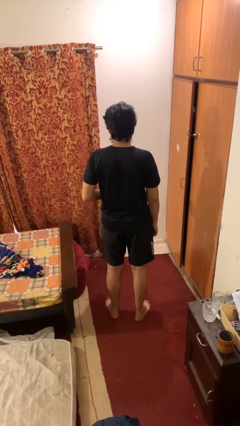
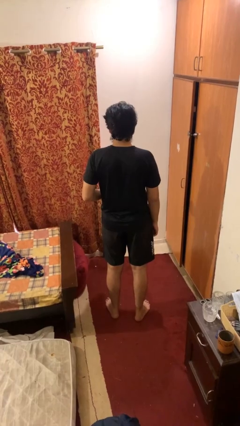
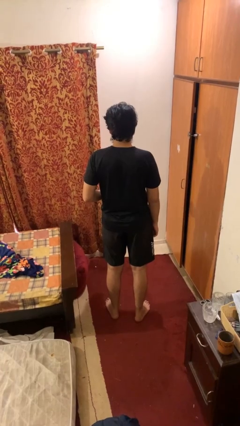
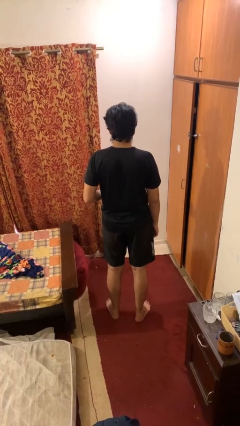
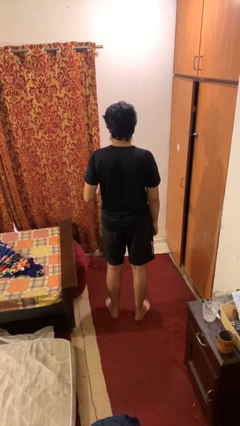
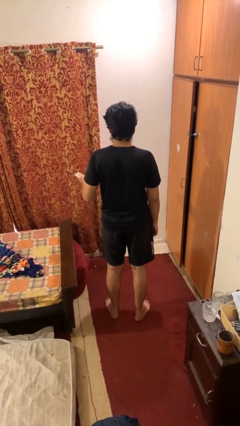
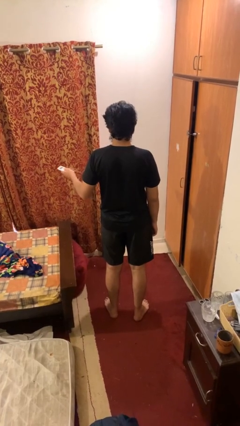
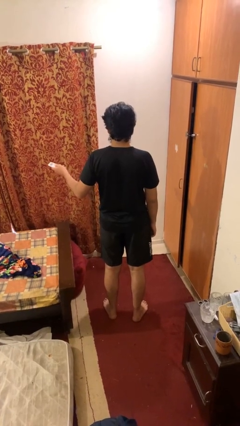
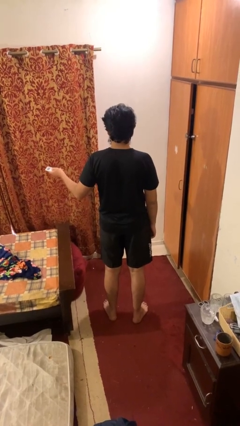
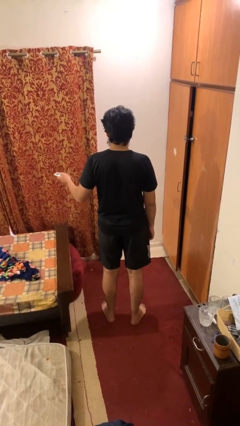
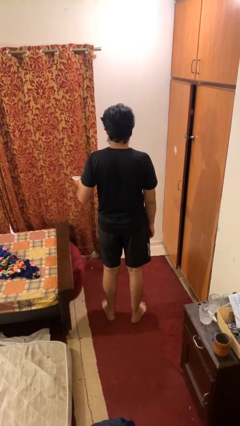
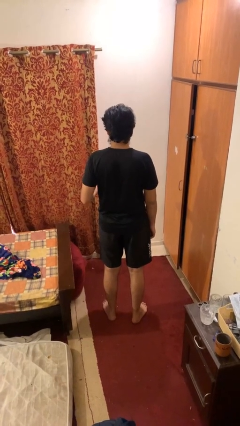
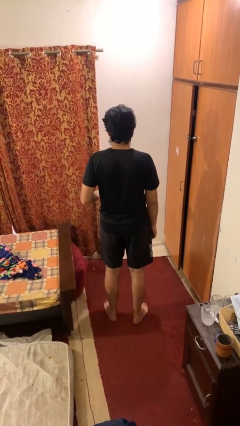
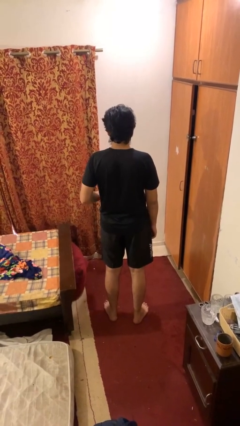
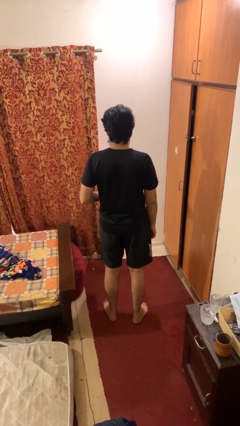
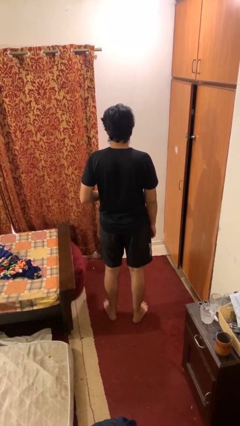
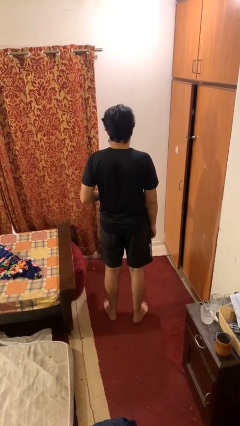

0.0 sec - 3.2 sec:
person uses television remote

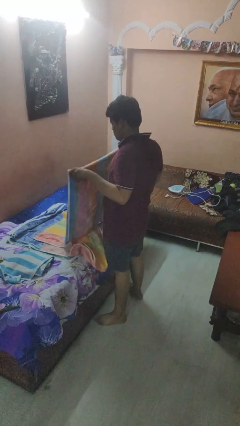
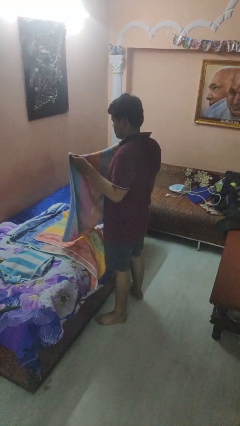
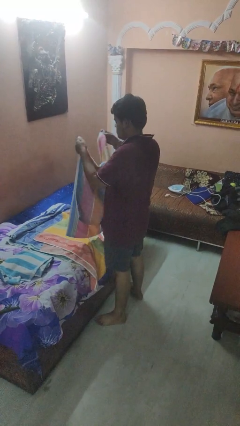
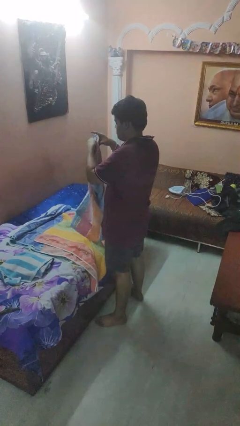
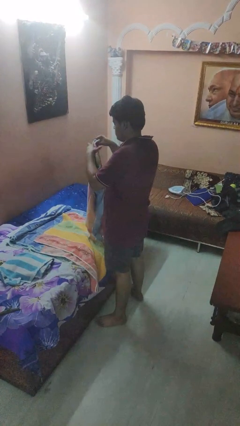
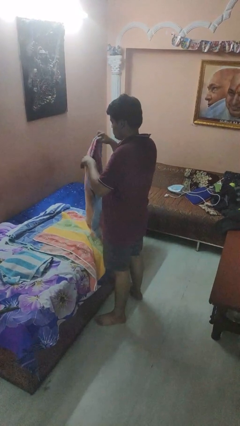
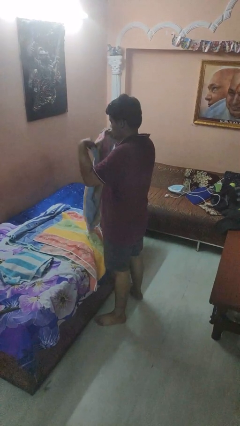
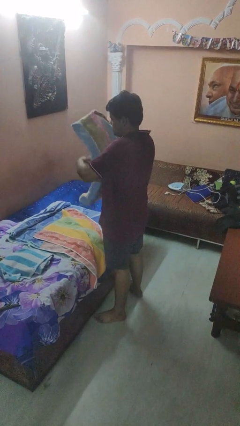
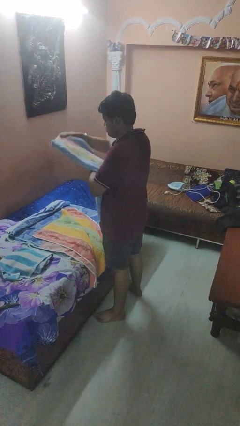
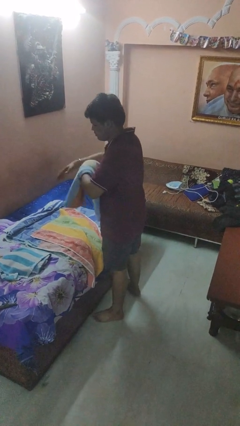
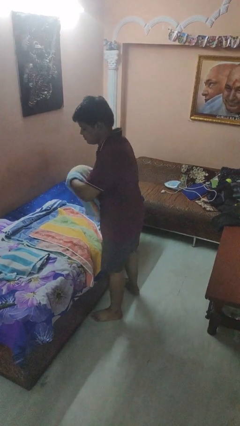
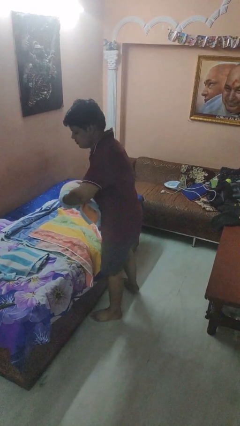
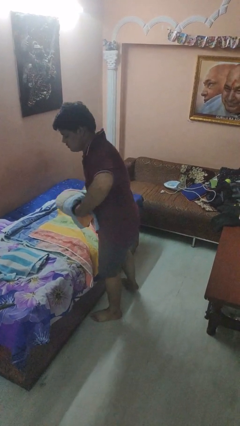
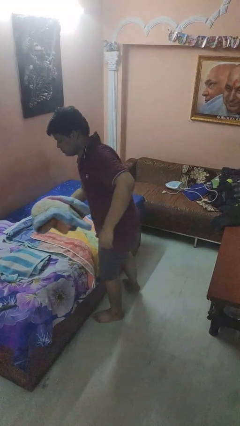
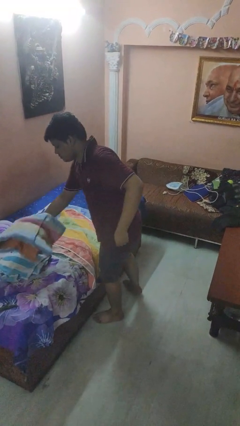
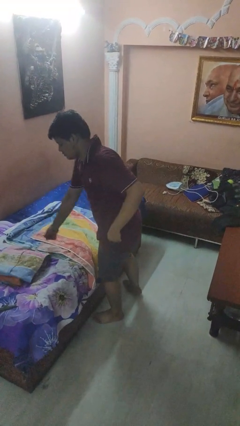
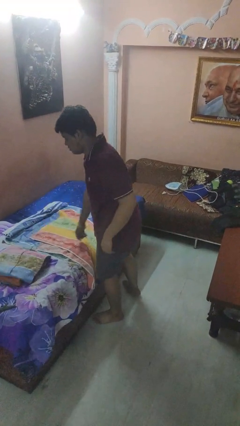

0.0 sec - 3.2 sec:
person folds towel

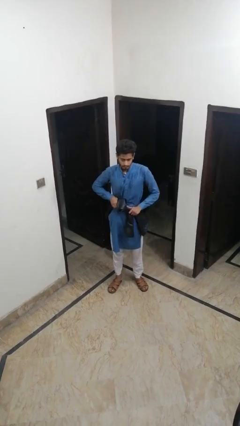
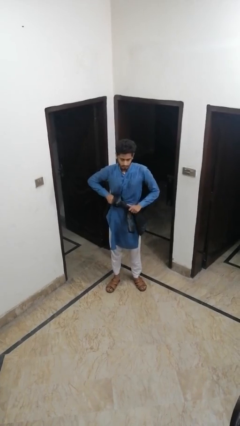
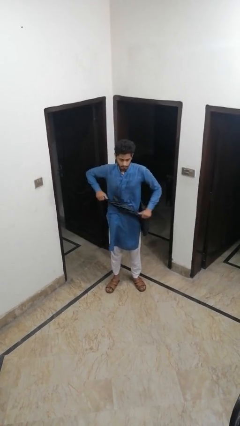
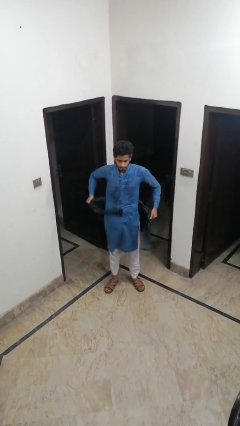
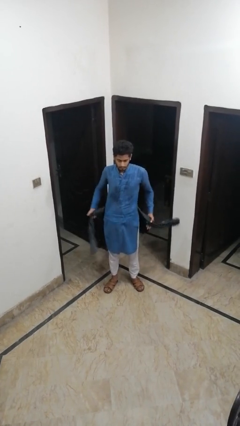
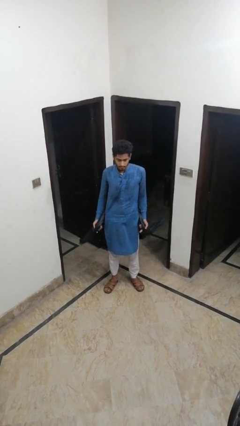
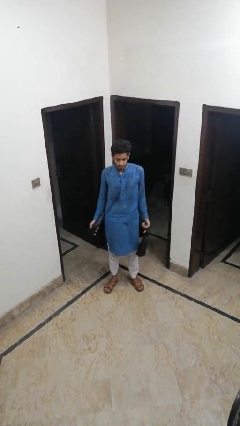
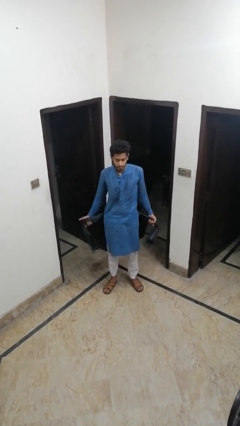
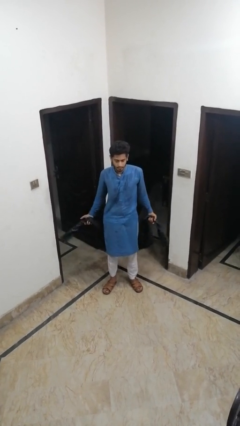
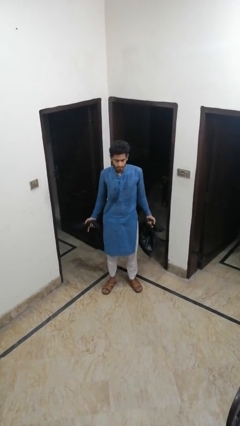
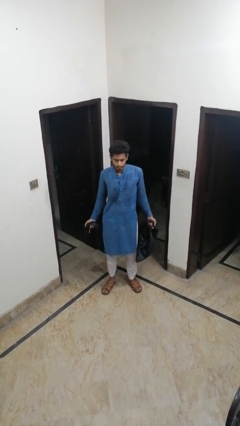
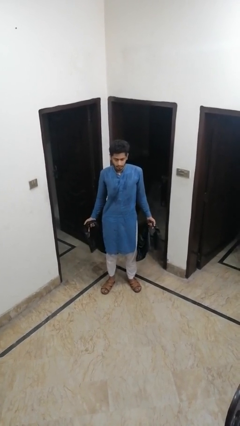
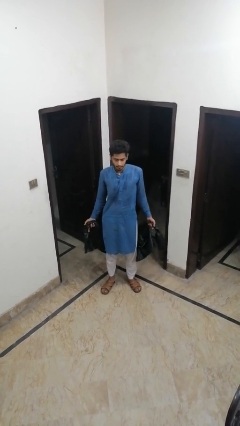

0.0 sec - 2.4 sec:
person unties jacket around waist

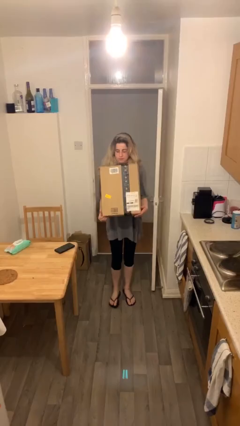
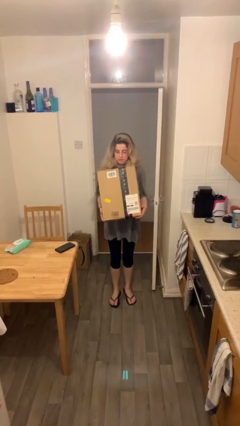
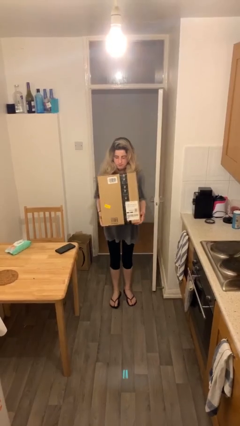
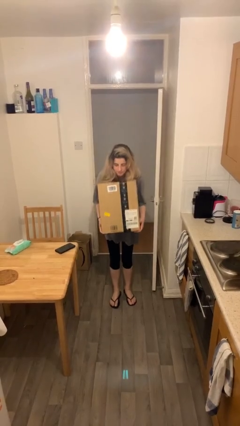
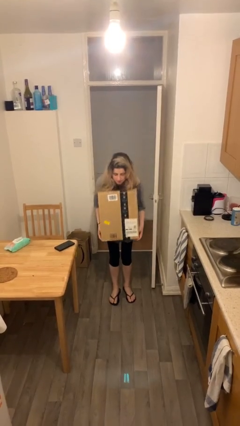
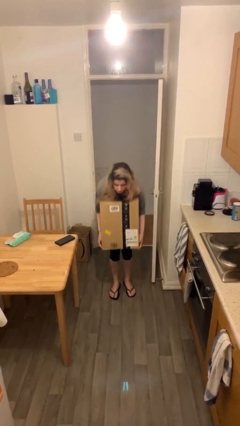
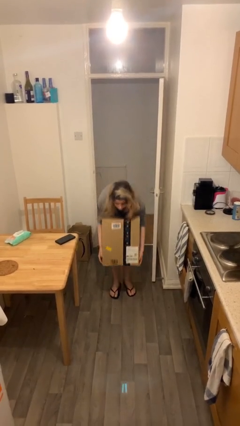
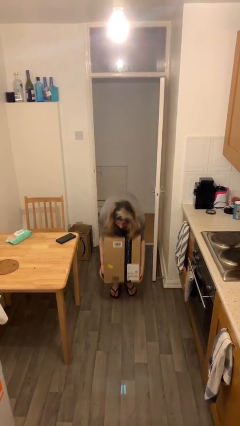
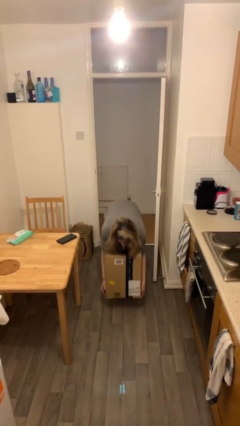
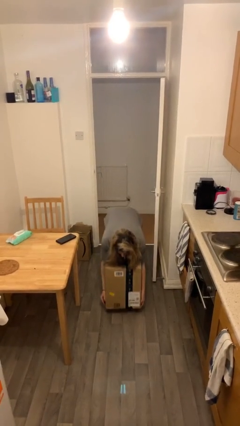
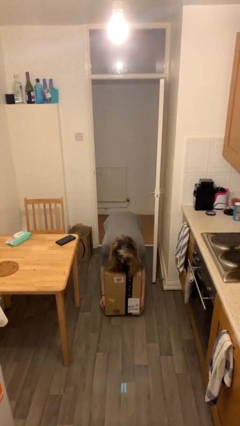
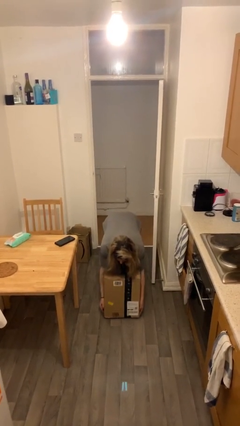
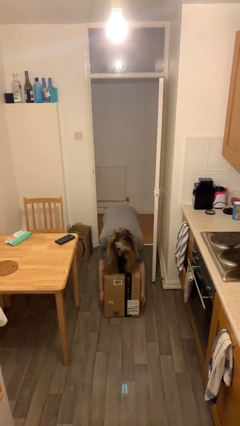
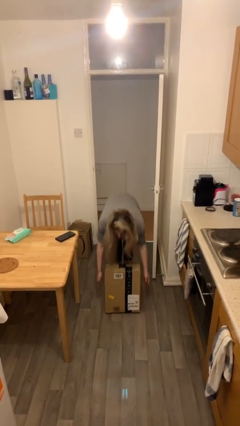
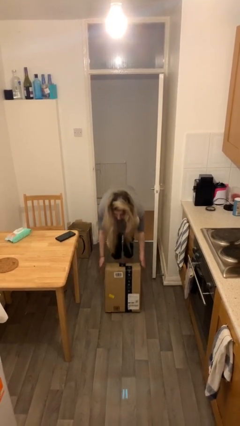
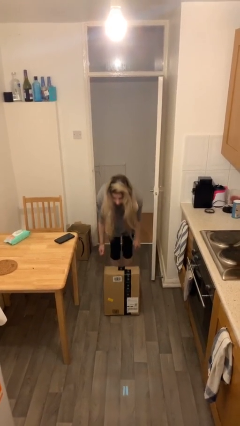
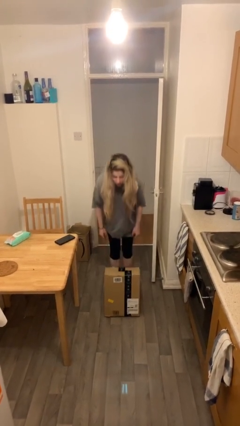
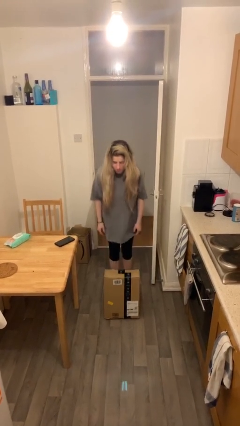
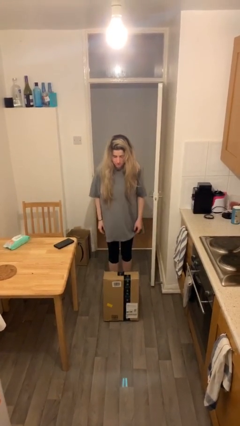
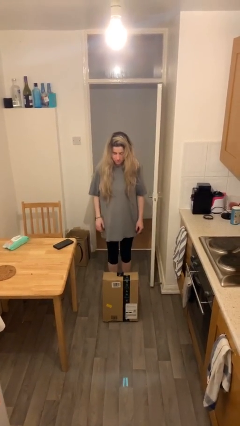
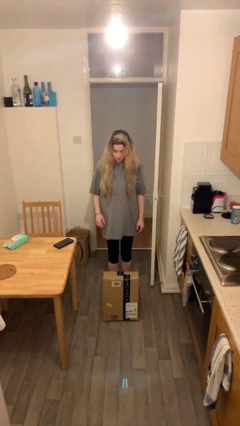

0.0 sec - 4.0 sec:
person puts down object on floor

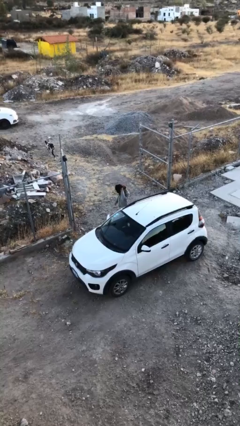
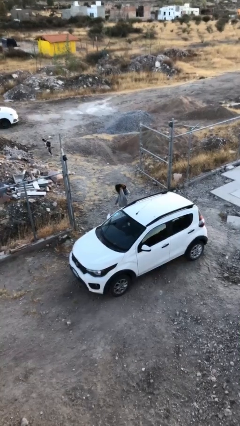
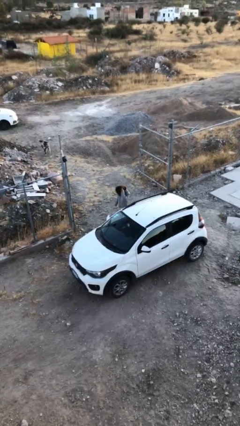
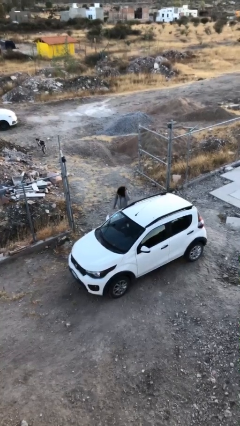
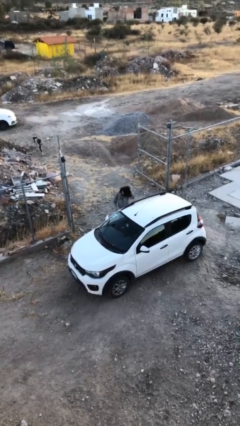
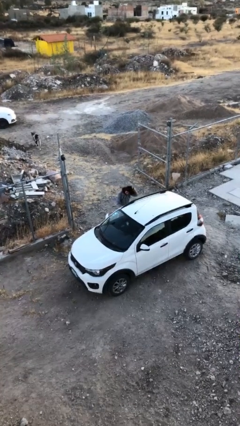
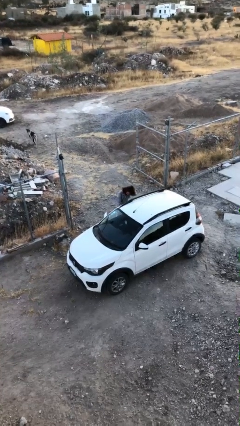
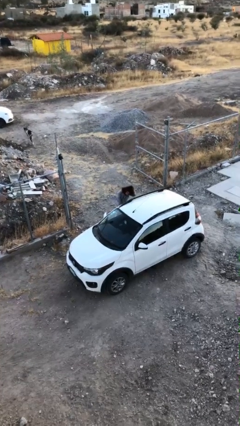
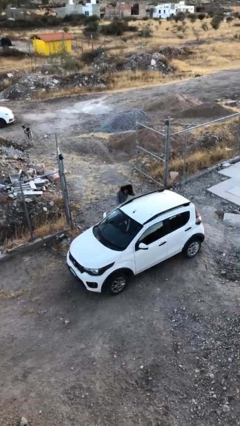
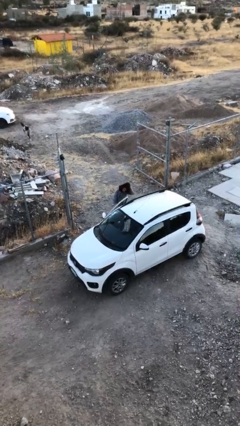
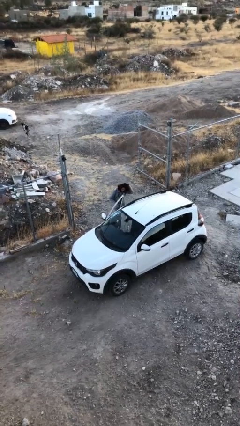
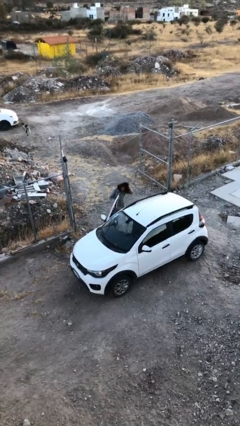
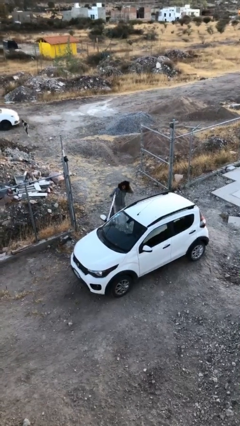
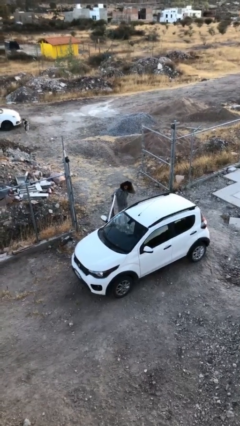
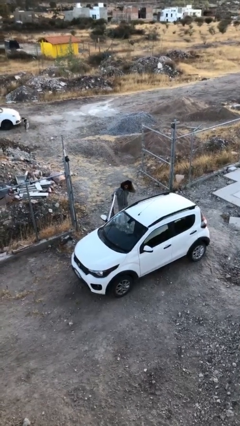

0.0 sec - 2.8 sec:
person opens car door

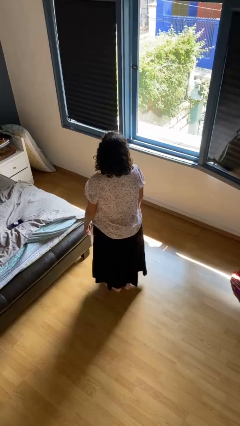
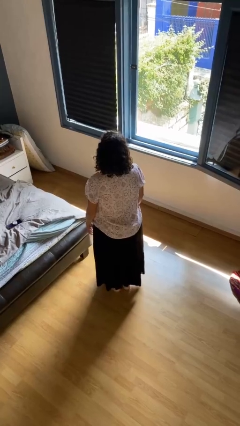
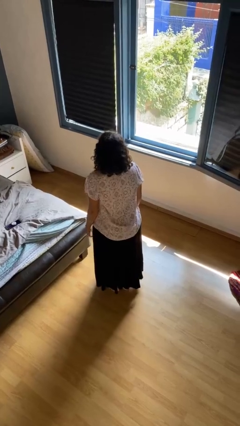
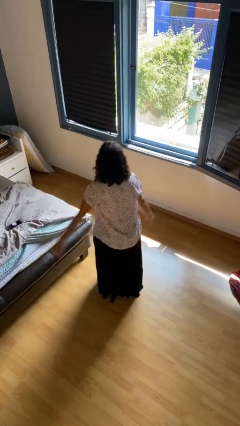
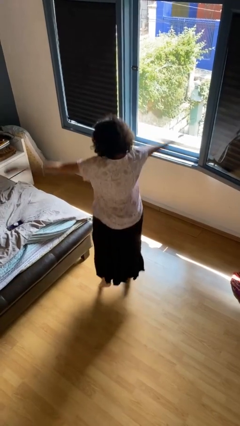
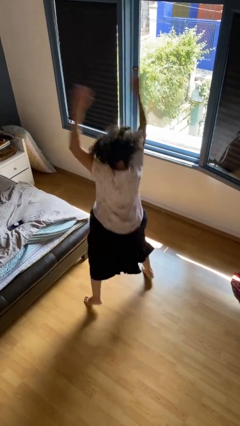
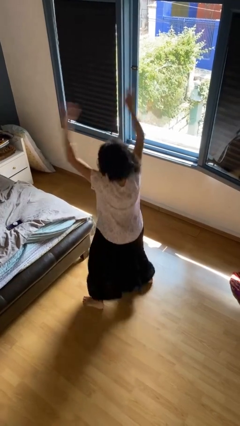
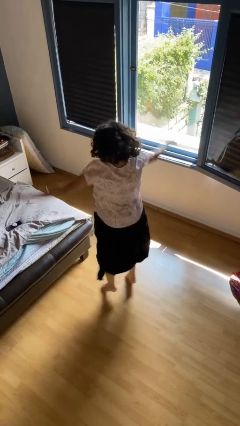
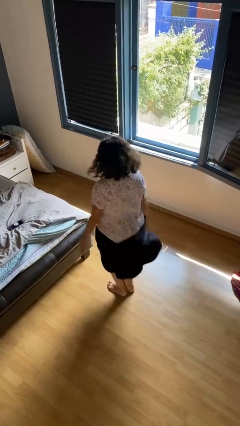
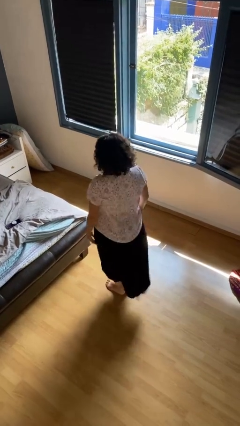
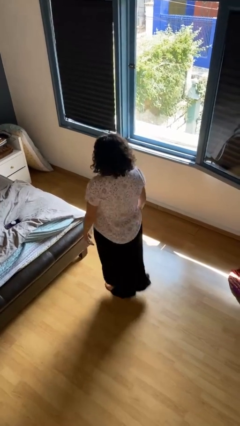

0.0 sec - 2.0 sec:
person exercises with jumping jacks
